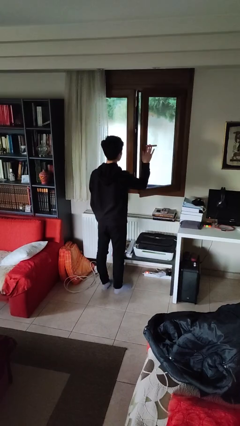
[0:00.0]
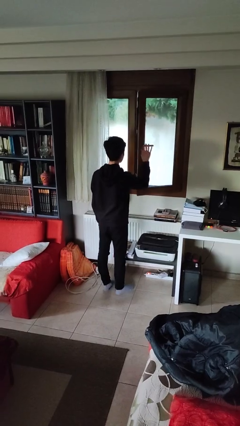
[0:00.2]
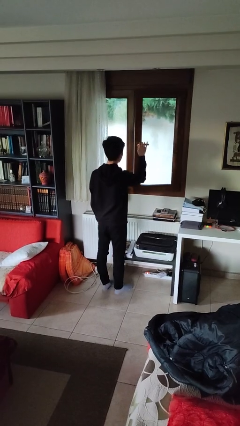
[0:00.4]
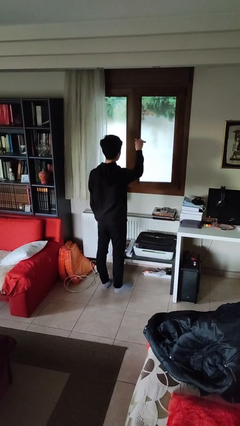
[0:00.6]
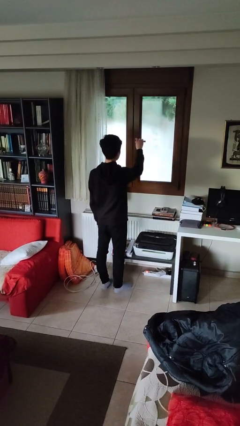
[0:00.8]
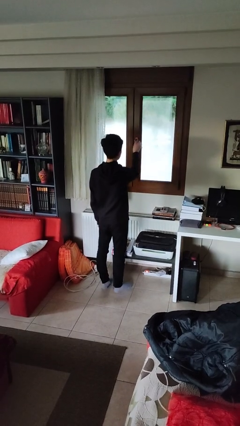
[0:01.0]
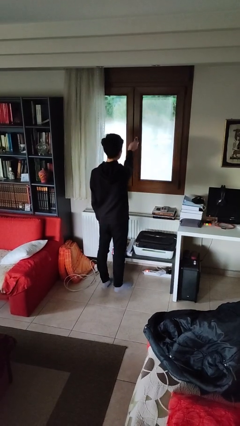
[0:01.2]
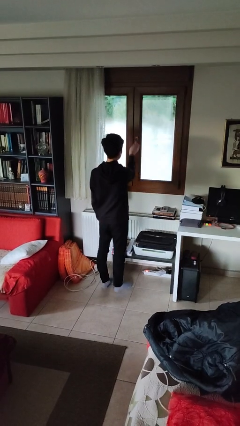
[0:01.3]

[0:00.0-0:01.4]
person closes home window

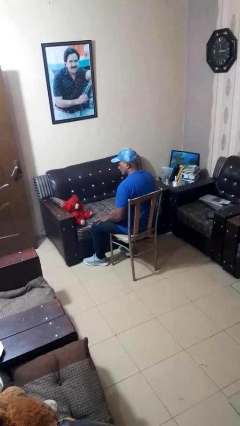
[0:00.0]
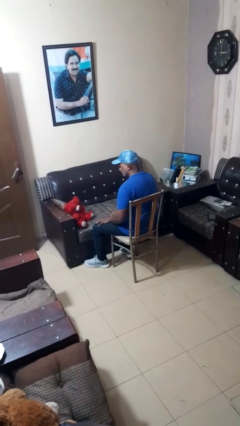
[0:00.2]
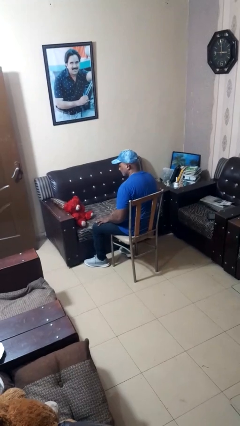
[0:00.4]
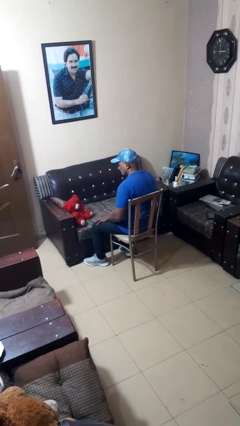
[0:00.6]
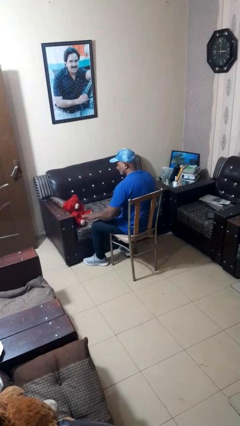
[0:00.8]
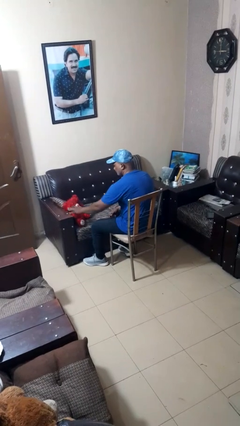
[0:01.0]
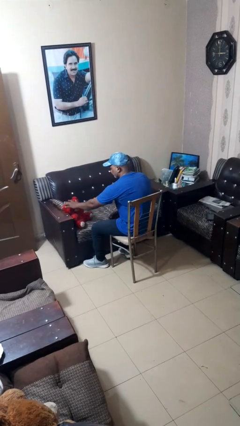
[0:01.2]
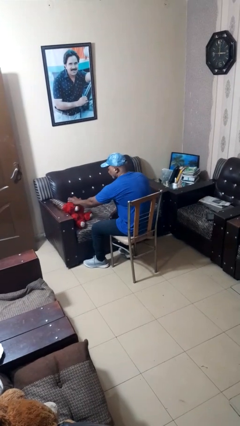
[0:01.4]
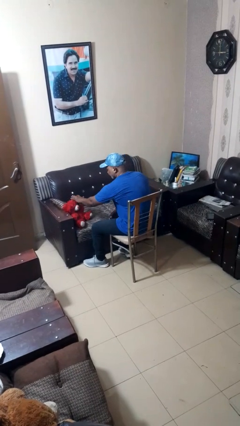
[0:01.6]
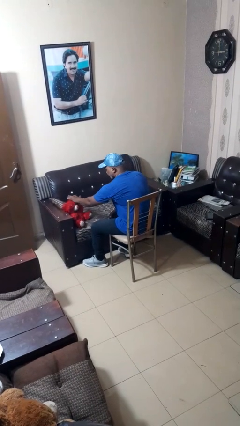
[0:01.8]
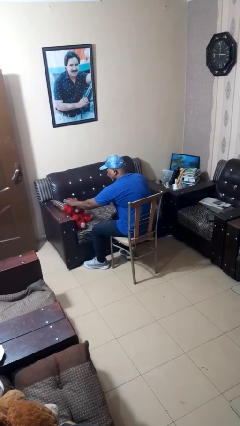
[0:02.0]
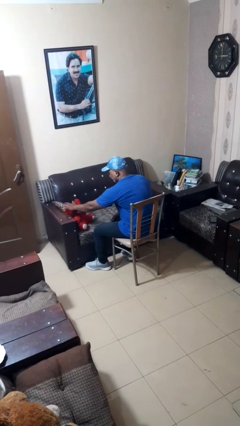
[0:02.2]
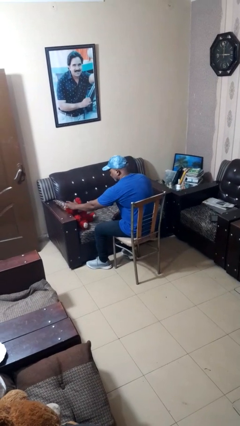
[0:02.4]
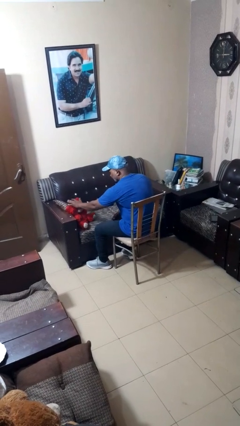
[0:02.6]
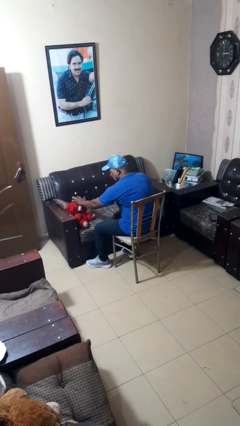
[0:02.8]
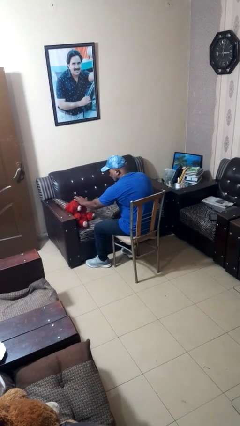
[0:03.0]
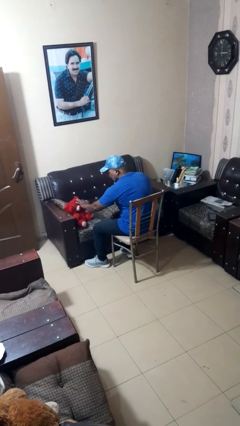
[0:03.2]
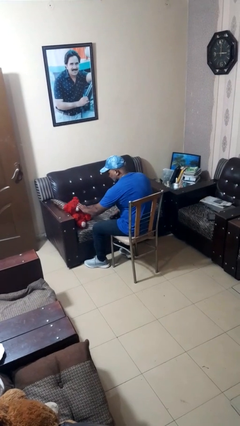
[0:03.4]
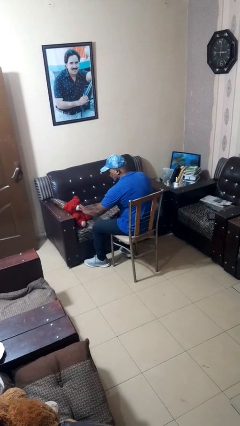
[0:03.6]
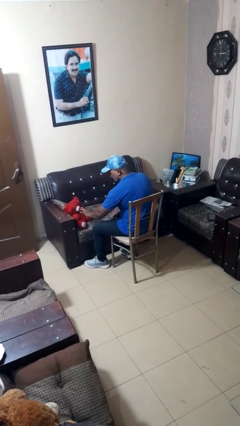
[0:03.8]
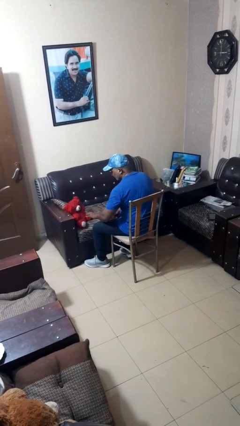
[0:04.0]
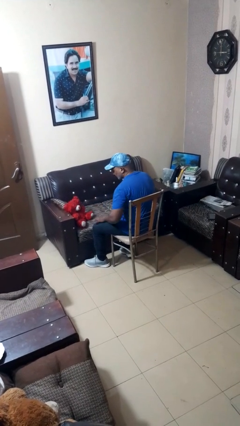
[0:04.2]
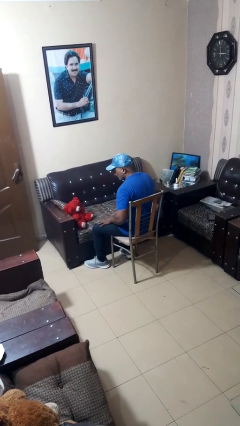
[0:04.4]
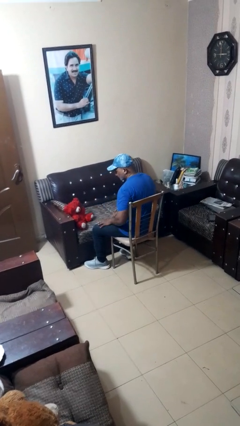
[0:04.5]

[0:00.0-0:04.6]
person waves hand over object

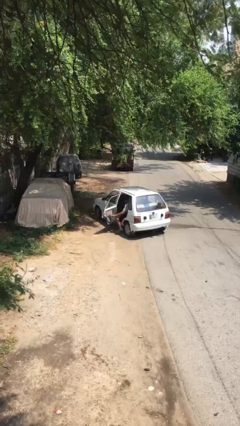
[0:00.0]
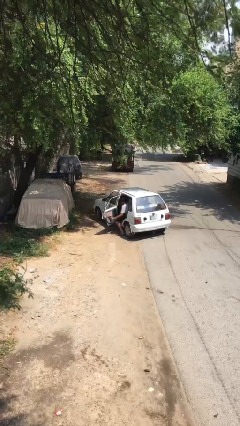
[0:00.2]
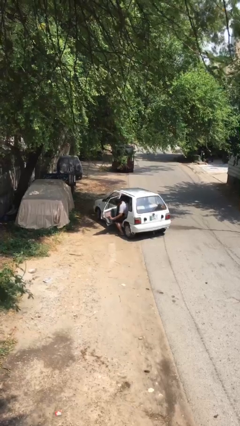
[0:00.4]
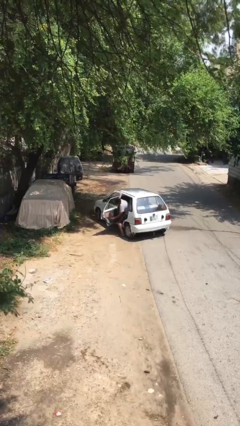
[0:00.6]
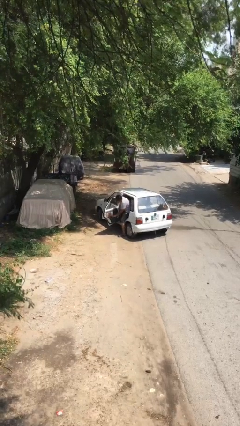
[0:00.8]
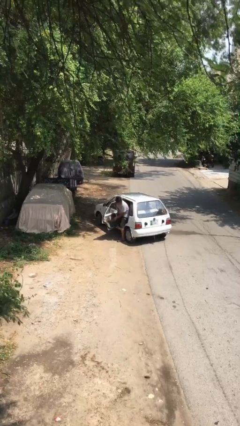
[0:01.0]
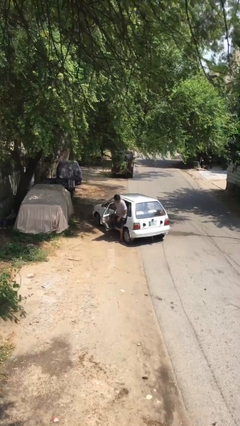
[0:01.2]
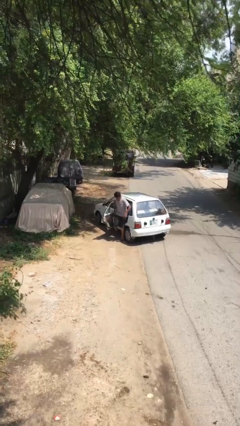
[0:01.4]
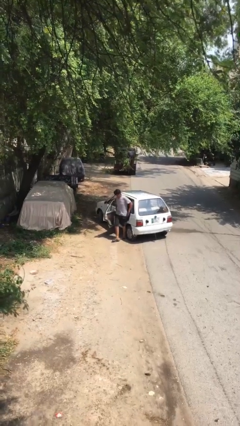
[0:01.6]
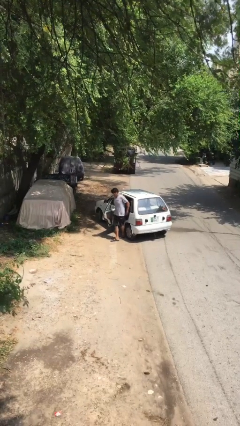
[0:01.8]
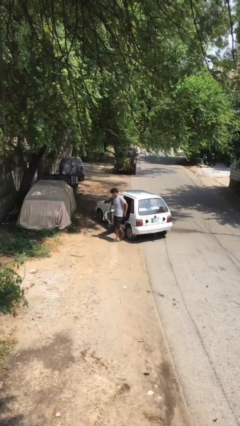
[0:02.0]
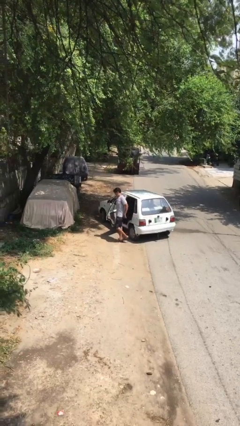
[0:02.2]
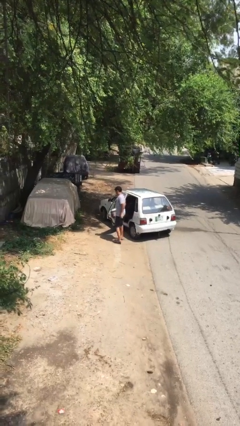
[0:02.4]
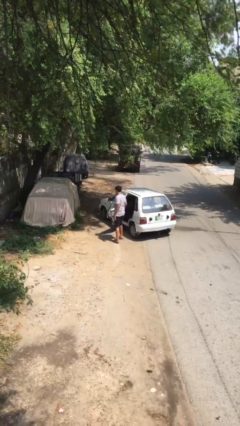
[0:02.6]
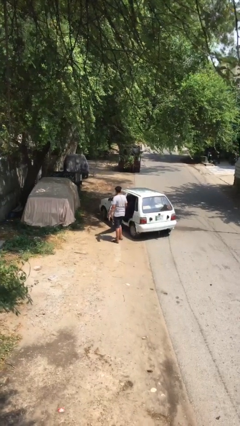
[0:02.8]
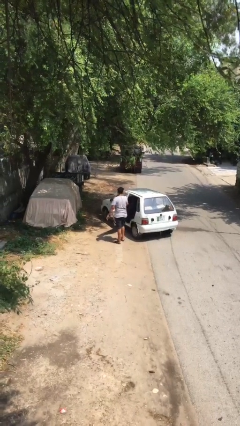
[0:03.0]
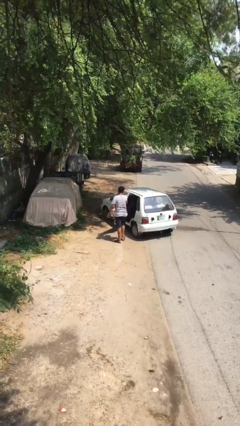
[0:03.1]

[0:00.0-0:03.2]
person exits car

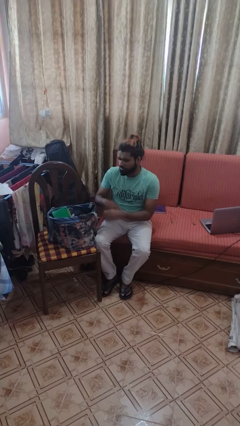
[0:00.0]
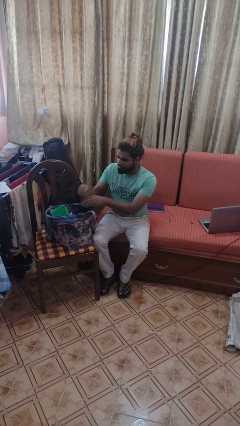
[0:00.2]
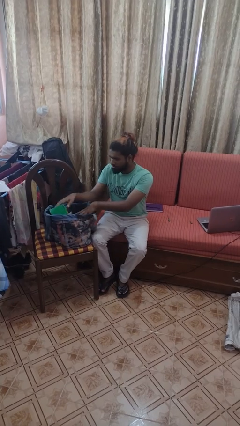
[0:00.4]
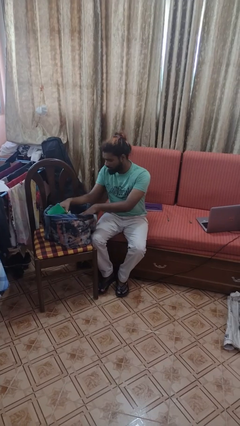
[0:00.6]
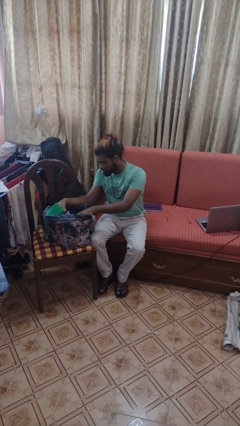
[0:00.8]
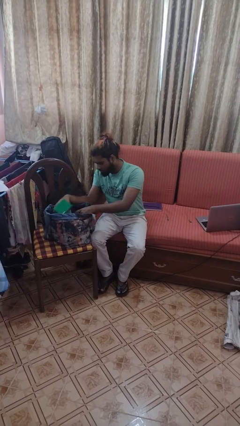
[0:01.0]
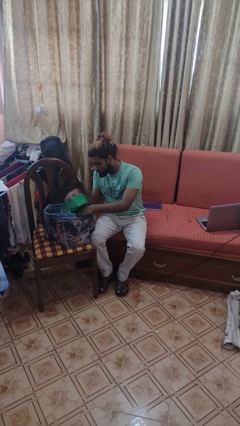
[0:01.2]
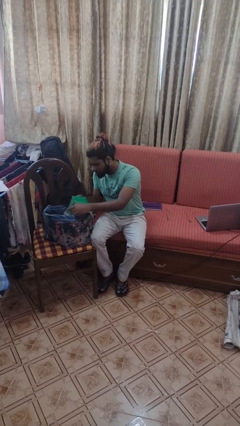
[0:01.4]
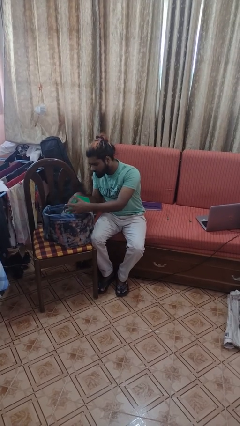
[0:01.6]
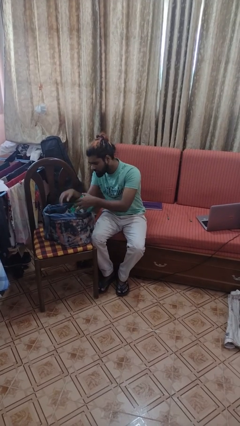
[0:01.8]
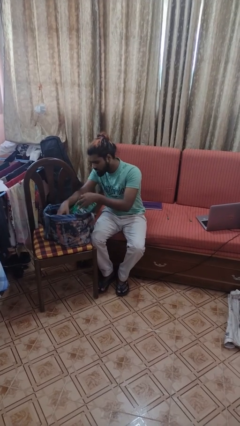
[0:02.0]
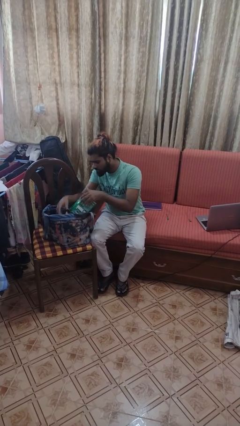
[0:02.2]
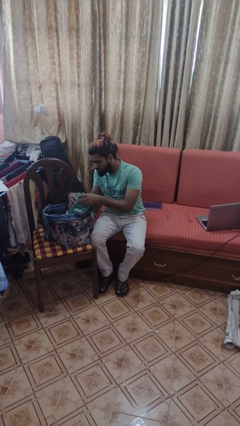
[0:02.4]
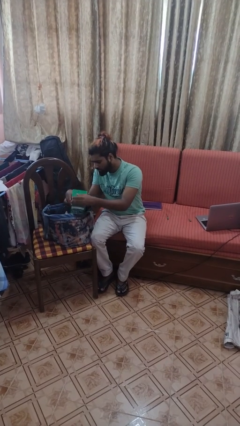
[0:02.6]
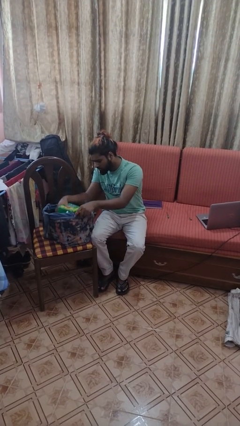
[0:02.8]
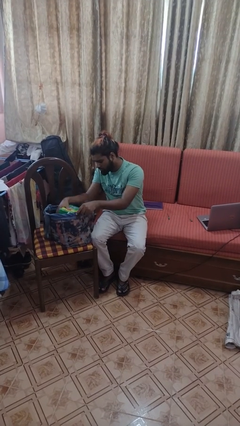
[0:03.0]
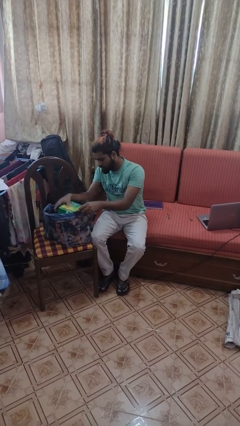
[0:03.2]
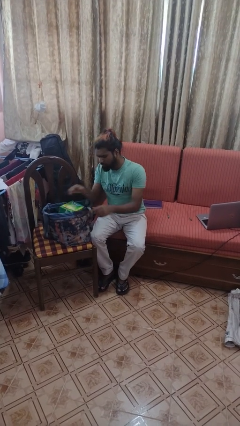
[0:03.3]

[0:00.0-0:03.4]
person searches in bag

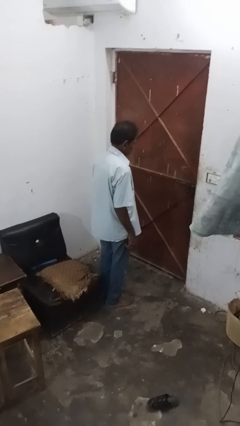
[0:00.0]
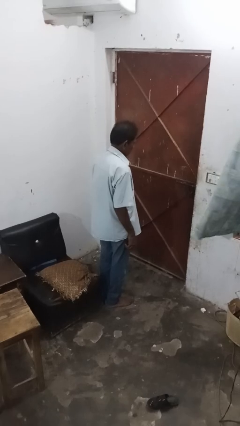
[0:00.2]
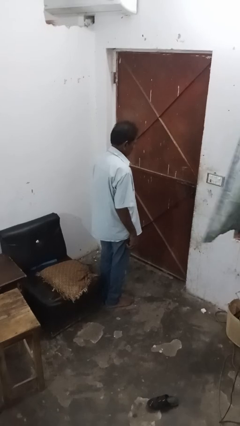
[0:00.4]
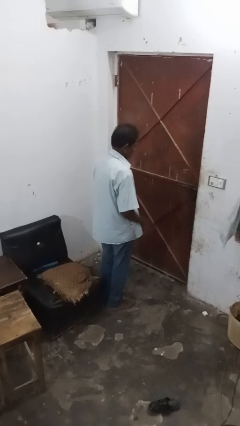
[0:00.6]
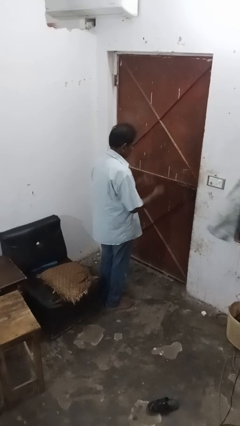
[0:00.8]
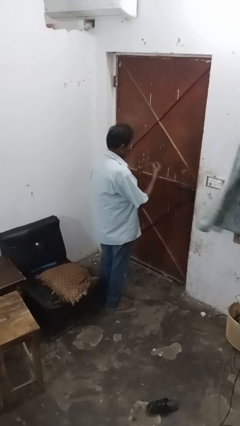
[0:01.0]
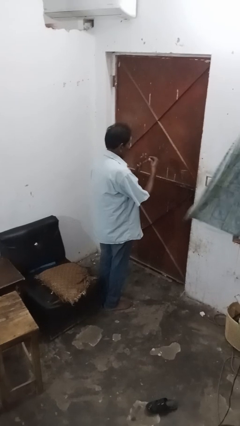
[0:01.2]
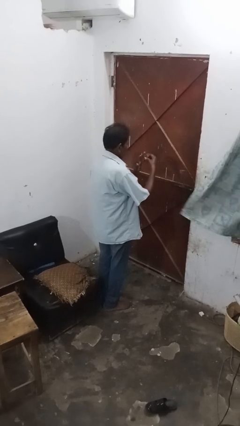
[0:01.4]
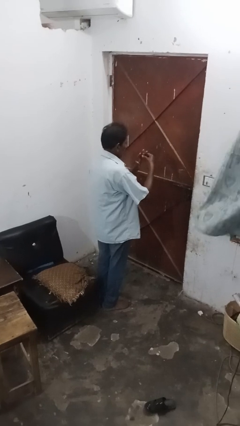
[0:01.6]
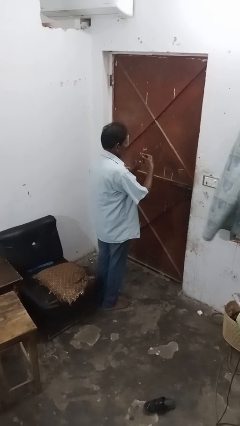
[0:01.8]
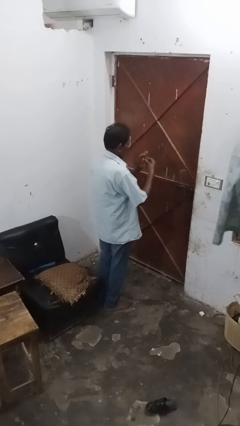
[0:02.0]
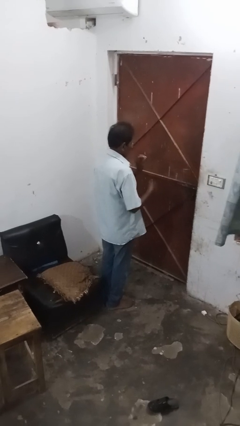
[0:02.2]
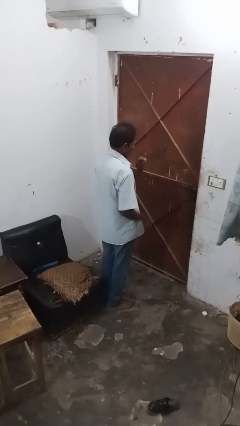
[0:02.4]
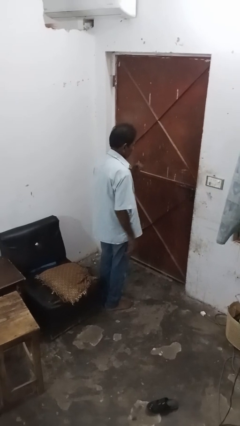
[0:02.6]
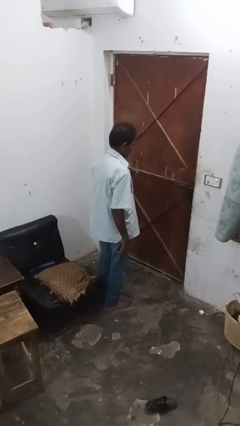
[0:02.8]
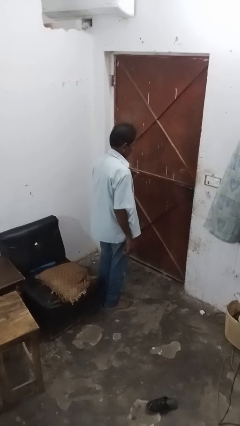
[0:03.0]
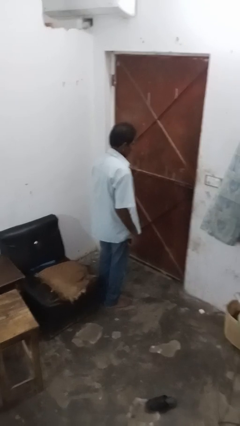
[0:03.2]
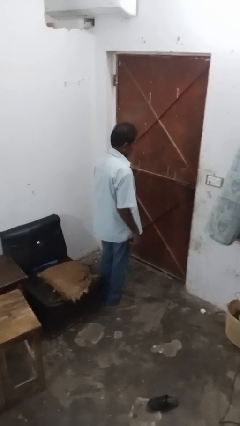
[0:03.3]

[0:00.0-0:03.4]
person puts on ring

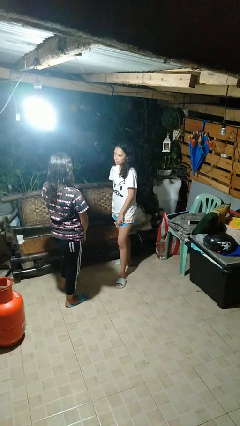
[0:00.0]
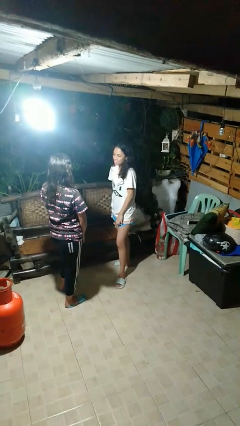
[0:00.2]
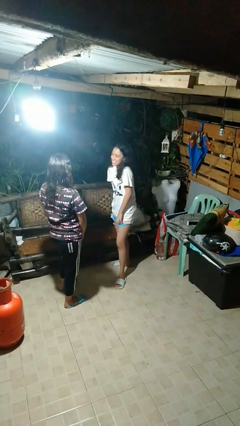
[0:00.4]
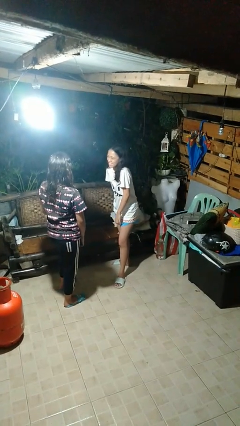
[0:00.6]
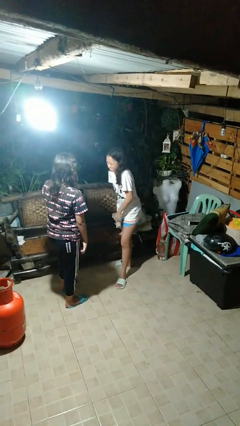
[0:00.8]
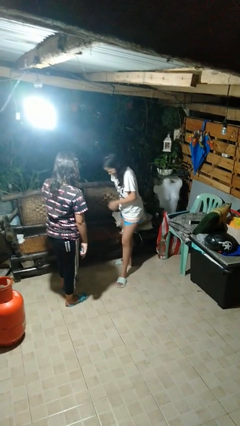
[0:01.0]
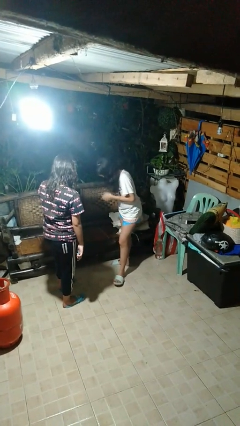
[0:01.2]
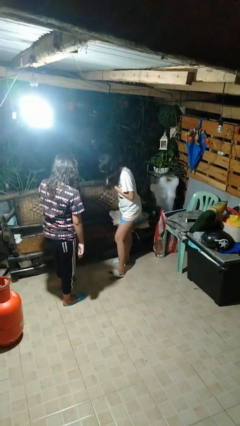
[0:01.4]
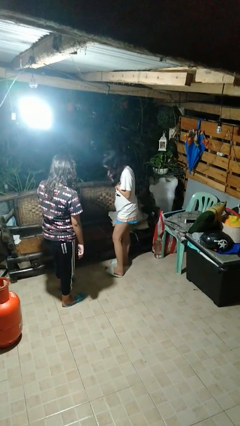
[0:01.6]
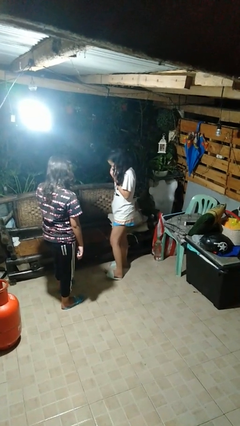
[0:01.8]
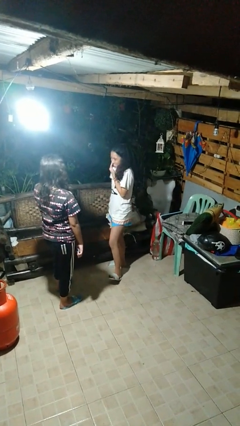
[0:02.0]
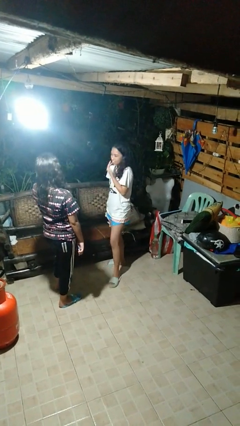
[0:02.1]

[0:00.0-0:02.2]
person laughs with person
